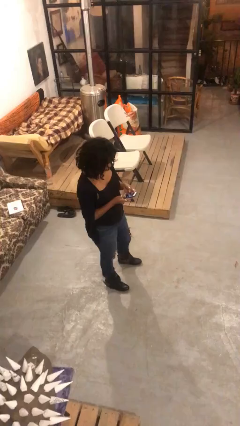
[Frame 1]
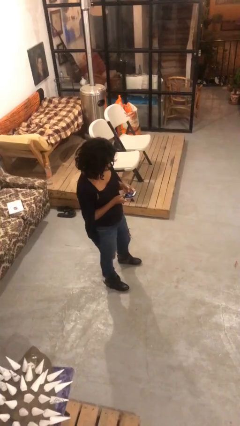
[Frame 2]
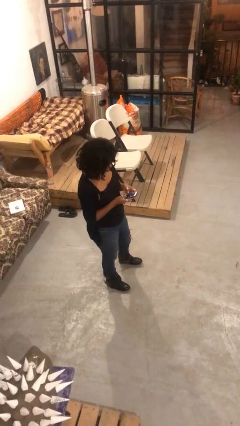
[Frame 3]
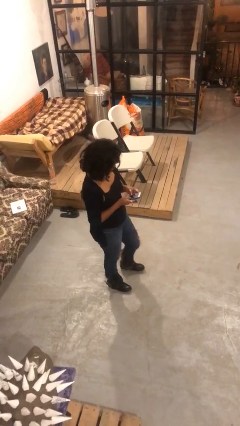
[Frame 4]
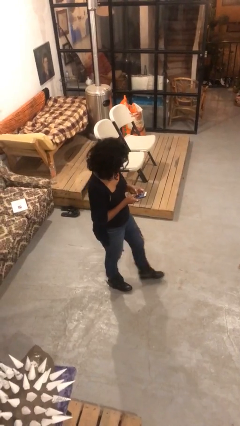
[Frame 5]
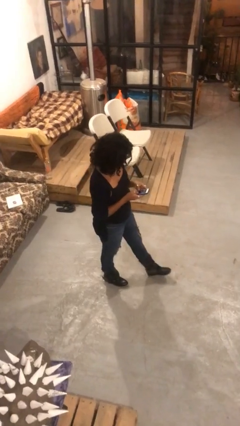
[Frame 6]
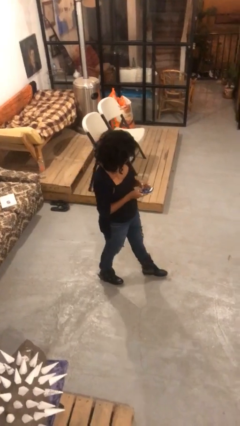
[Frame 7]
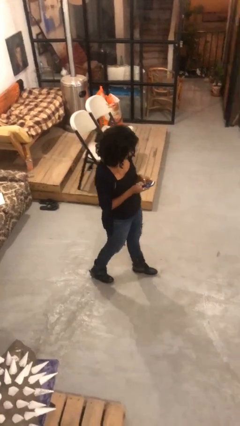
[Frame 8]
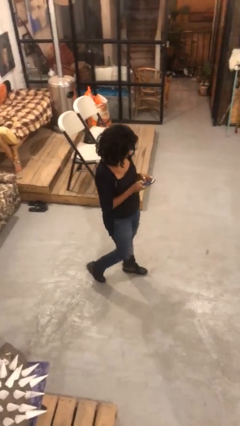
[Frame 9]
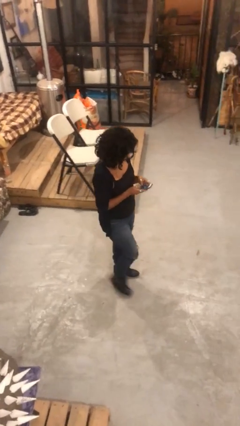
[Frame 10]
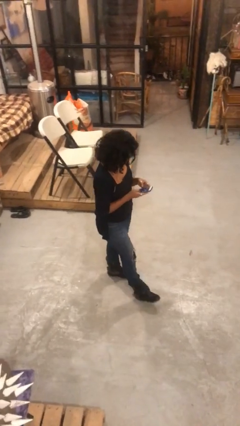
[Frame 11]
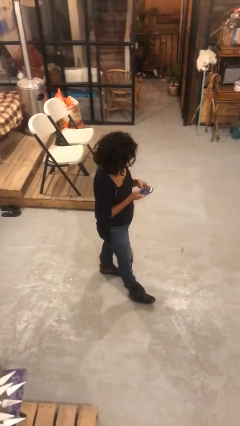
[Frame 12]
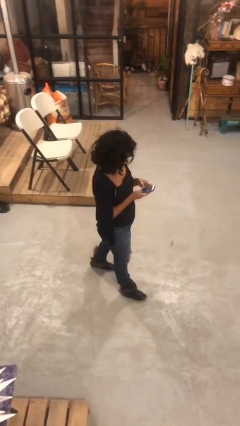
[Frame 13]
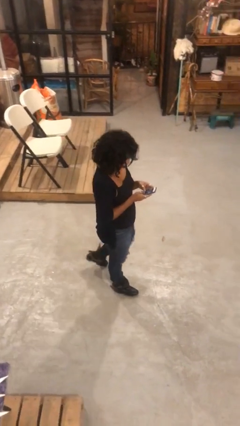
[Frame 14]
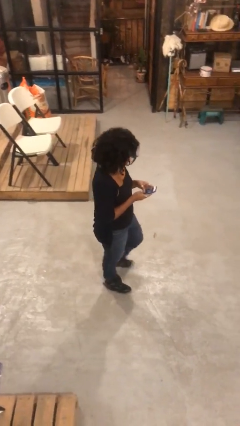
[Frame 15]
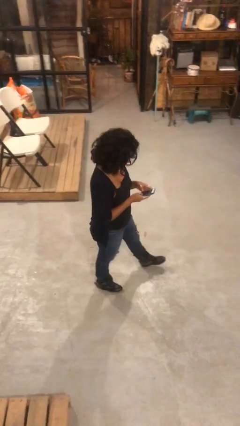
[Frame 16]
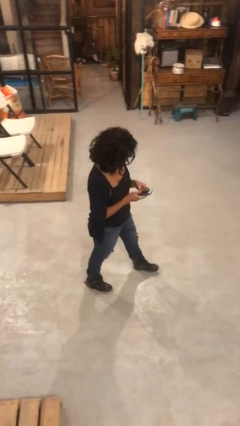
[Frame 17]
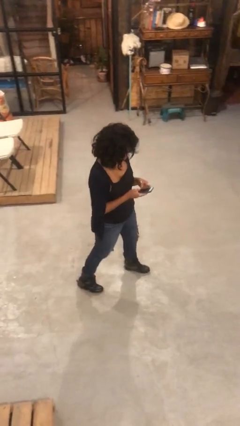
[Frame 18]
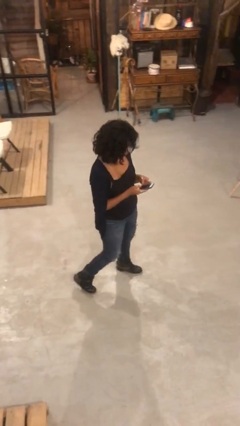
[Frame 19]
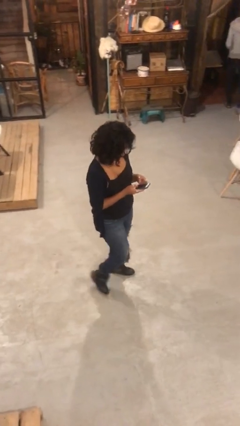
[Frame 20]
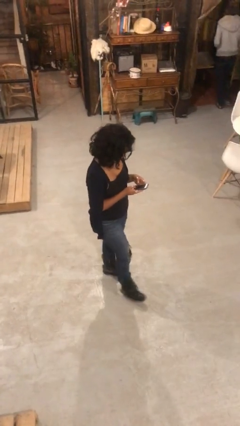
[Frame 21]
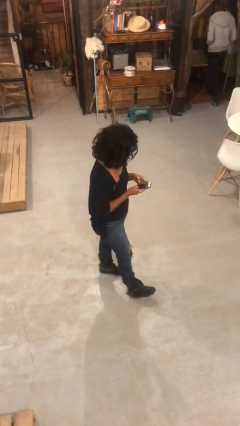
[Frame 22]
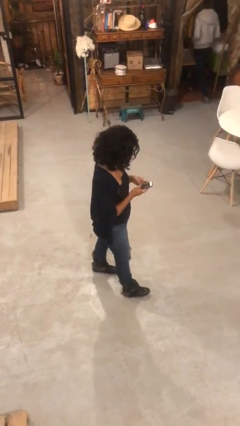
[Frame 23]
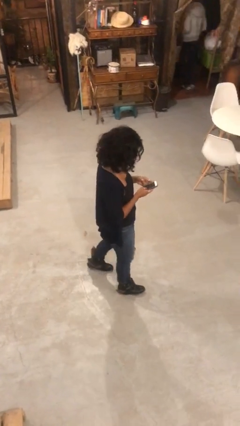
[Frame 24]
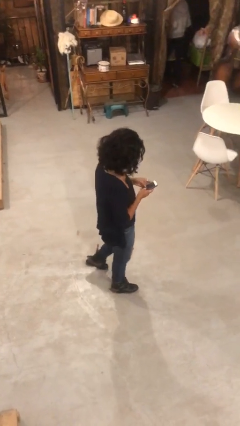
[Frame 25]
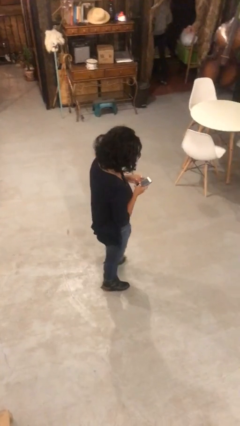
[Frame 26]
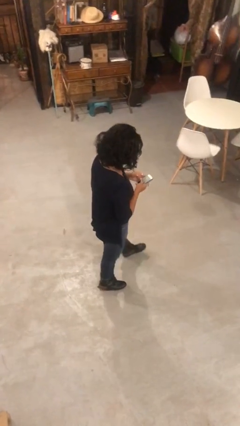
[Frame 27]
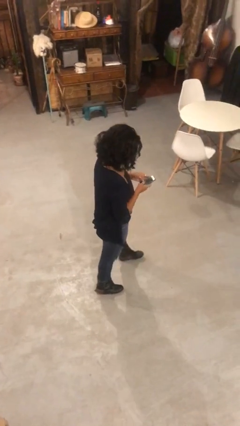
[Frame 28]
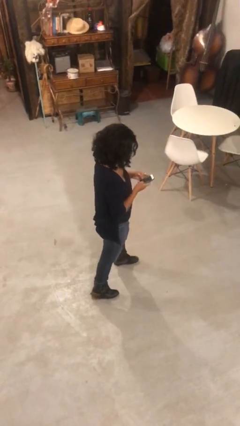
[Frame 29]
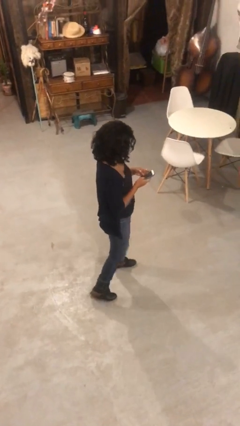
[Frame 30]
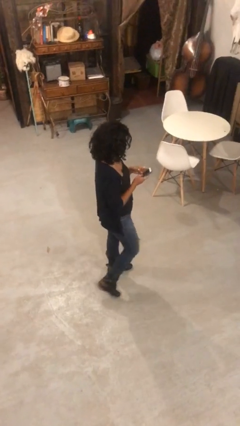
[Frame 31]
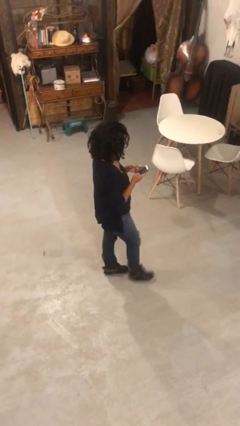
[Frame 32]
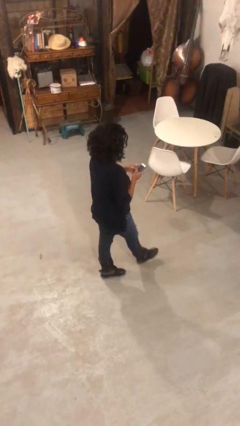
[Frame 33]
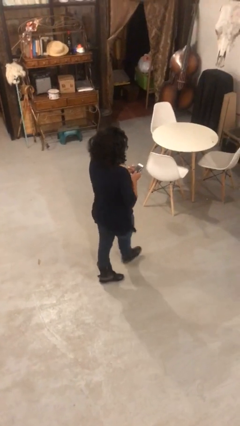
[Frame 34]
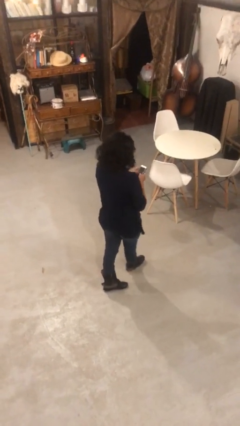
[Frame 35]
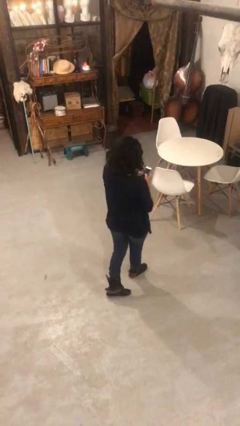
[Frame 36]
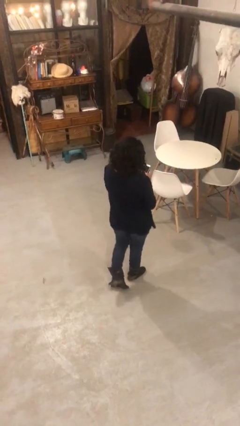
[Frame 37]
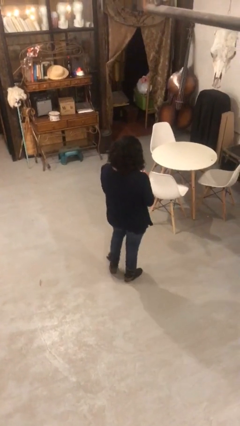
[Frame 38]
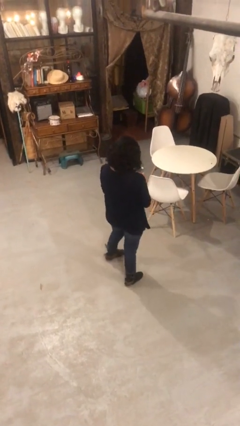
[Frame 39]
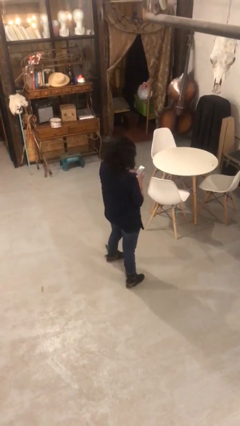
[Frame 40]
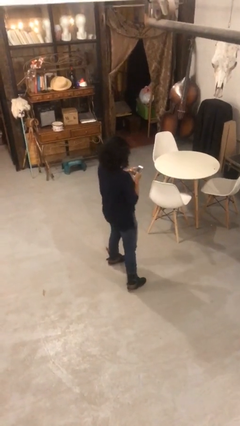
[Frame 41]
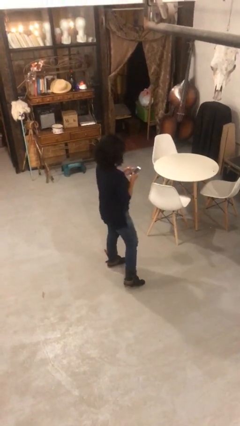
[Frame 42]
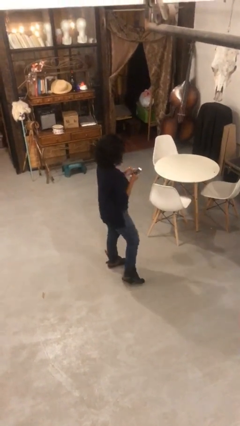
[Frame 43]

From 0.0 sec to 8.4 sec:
person texts on phone

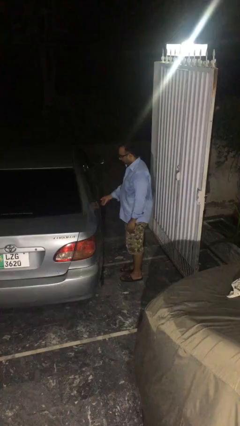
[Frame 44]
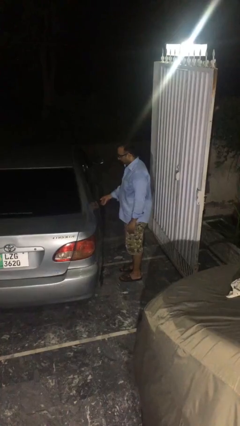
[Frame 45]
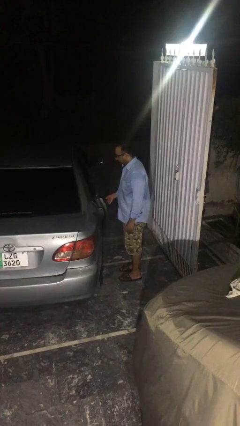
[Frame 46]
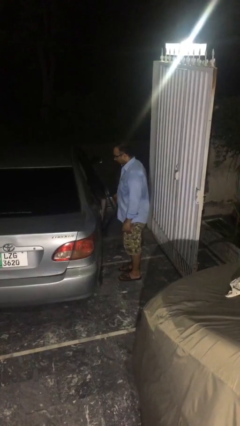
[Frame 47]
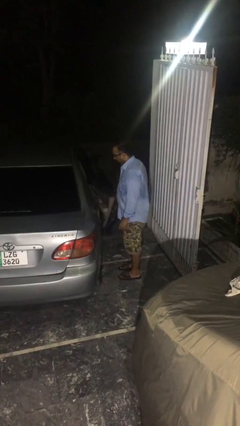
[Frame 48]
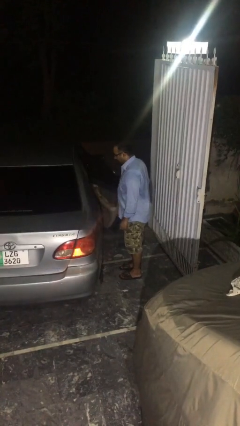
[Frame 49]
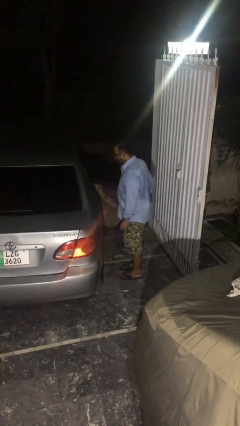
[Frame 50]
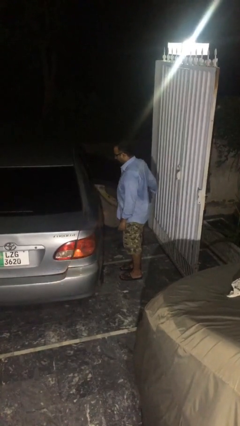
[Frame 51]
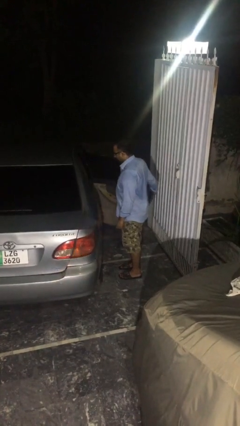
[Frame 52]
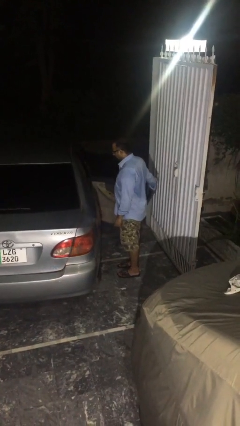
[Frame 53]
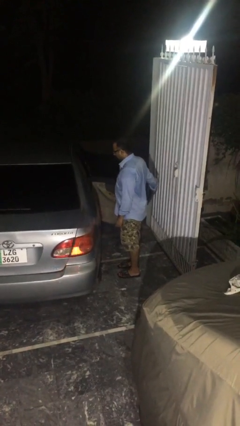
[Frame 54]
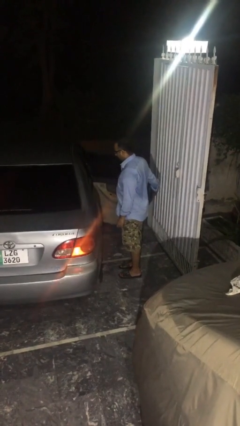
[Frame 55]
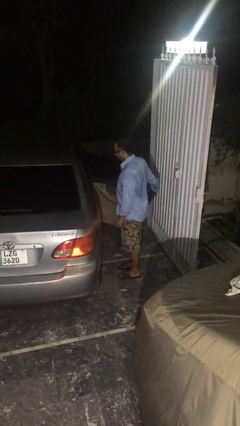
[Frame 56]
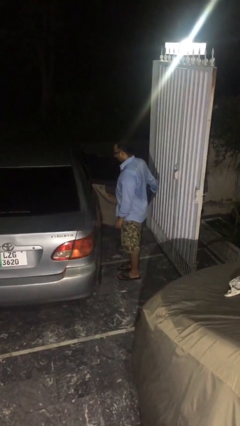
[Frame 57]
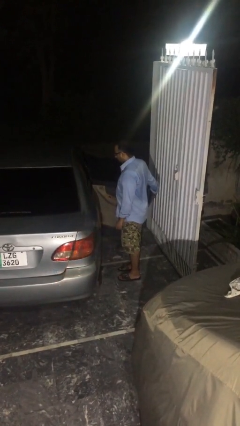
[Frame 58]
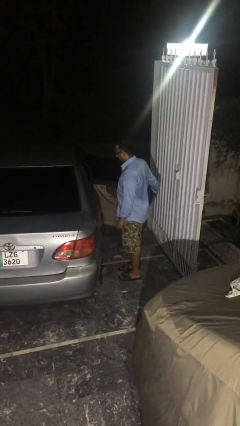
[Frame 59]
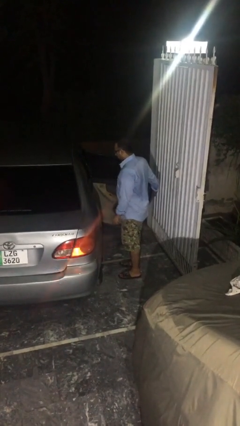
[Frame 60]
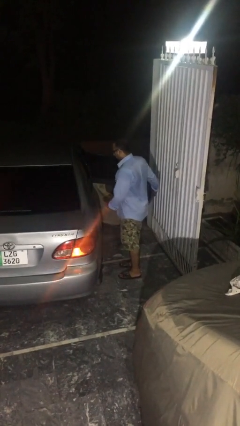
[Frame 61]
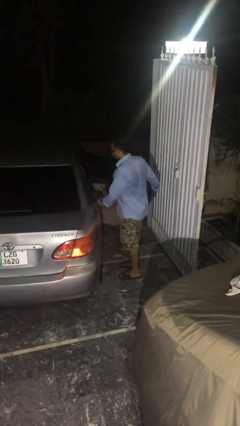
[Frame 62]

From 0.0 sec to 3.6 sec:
person opens car door

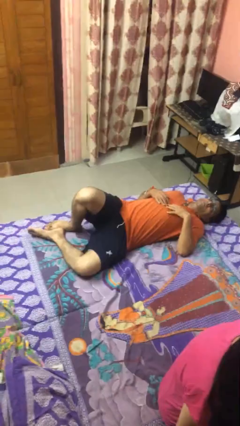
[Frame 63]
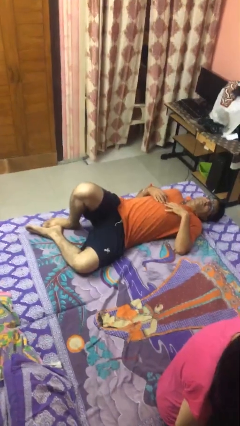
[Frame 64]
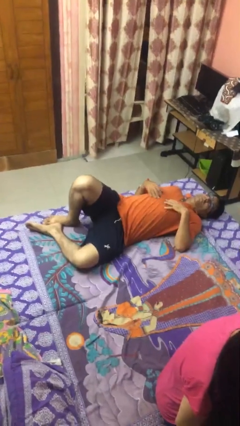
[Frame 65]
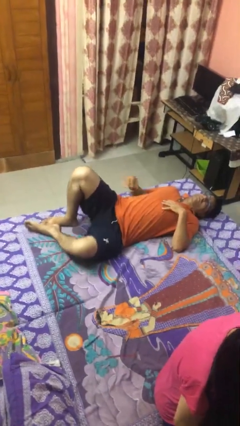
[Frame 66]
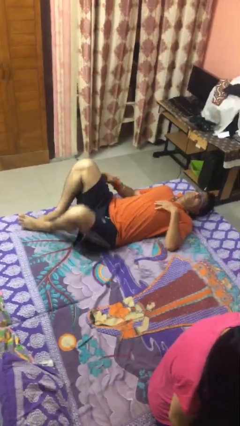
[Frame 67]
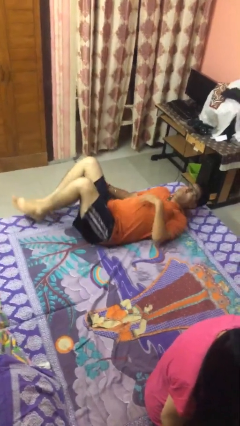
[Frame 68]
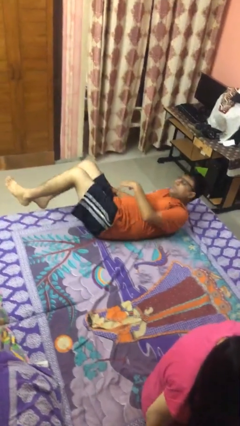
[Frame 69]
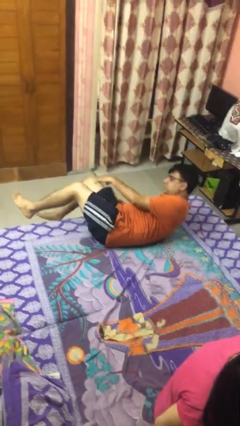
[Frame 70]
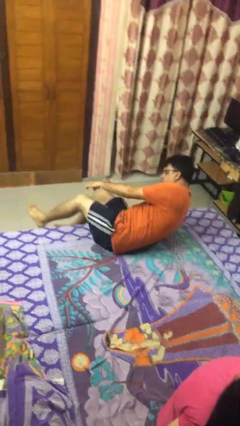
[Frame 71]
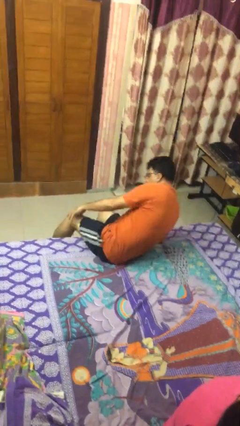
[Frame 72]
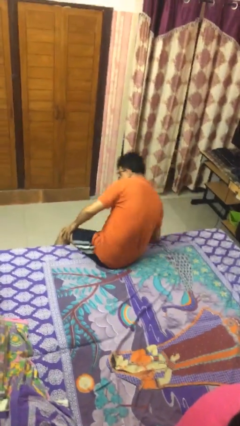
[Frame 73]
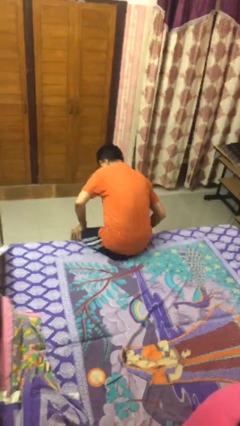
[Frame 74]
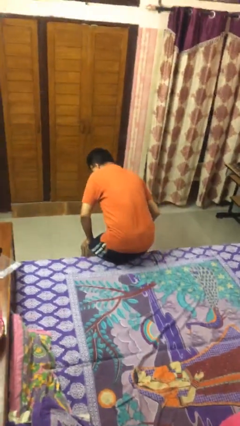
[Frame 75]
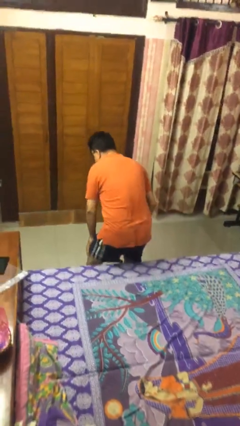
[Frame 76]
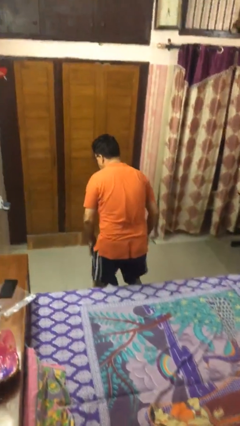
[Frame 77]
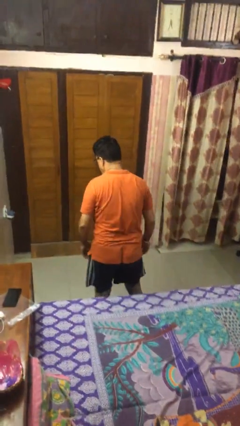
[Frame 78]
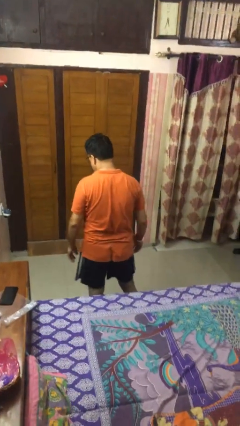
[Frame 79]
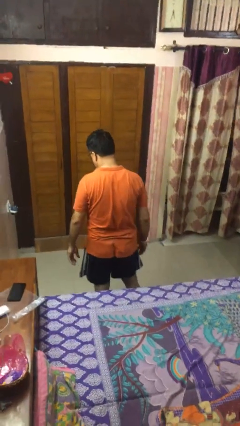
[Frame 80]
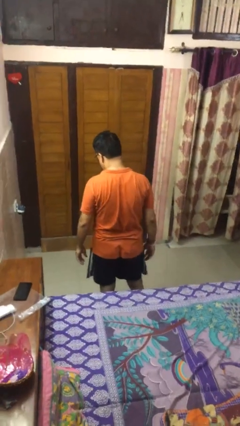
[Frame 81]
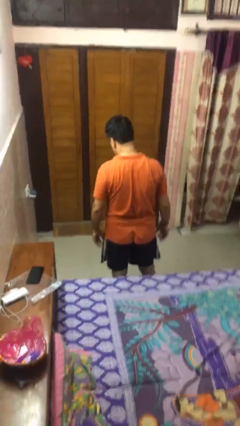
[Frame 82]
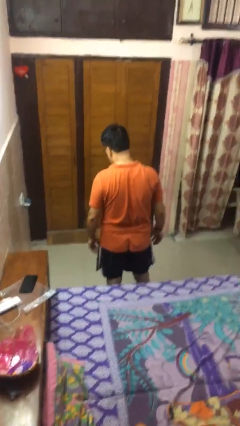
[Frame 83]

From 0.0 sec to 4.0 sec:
person stands up

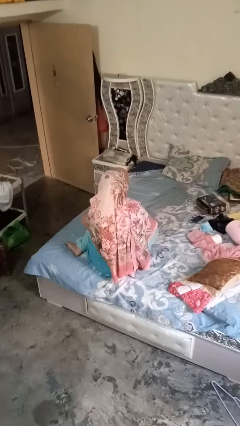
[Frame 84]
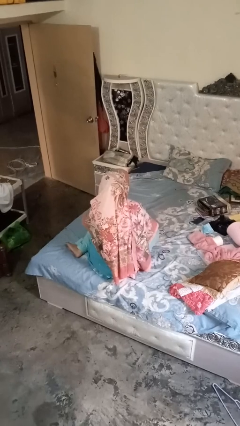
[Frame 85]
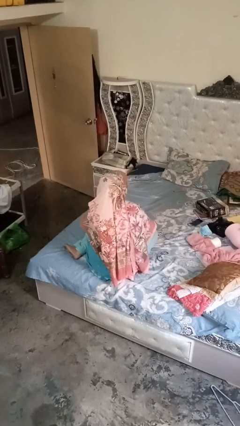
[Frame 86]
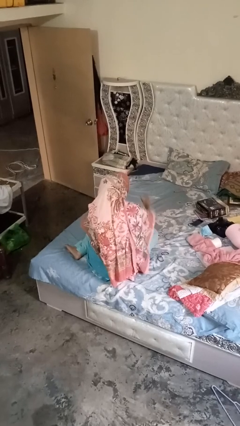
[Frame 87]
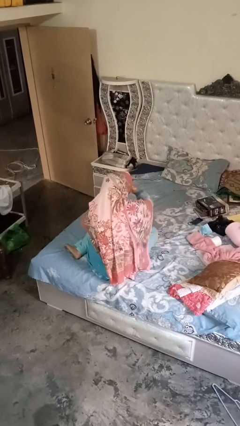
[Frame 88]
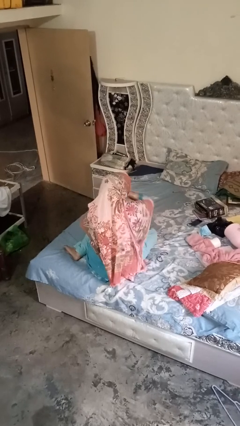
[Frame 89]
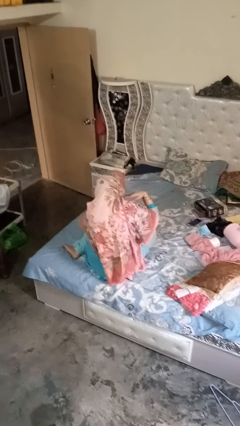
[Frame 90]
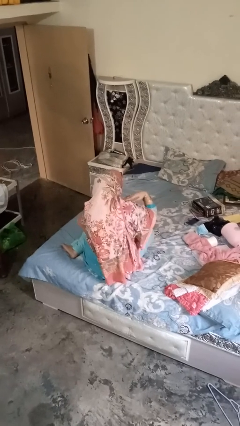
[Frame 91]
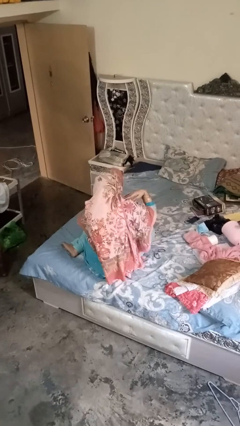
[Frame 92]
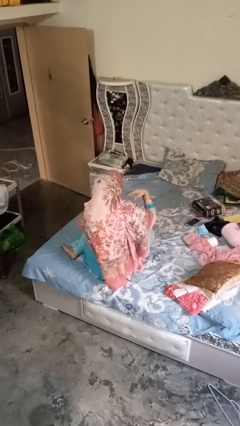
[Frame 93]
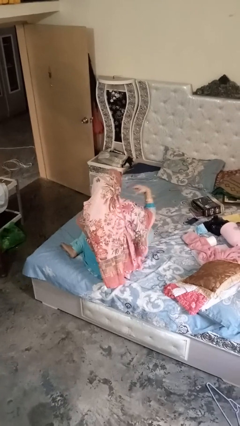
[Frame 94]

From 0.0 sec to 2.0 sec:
person gestures cut
